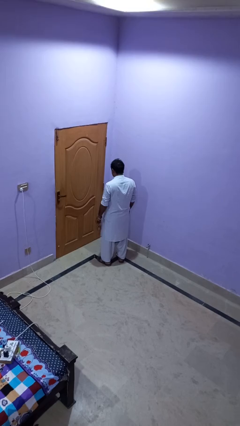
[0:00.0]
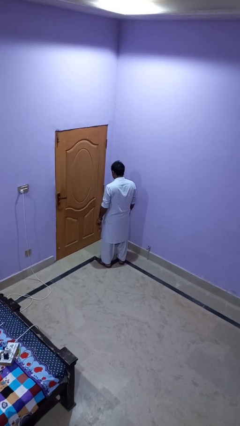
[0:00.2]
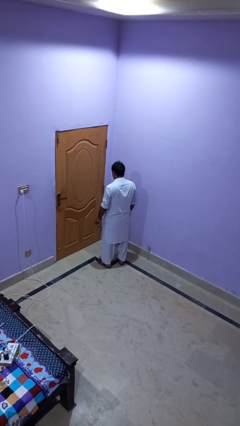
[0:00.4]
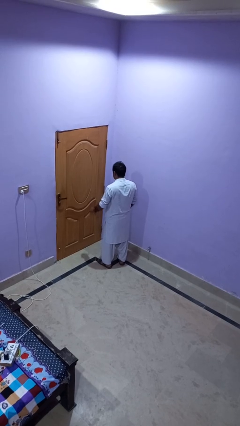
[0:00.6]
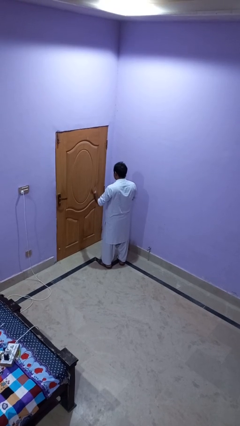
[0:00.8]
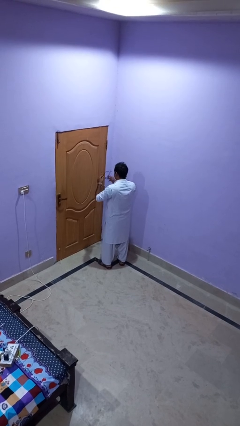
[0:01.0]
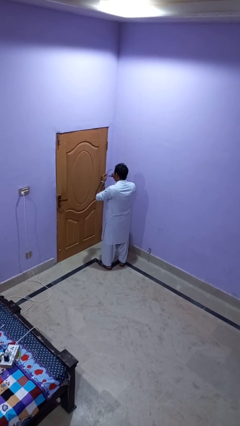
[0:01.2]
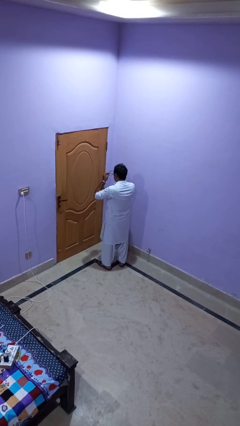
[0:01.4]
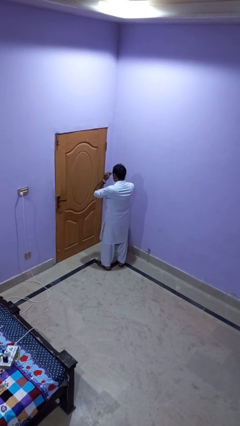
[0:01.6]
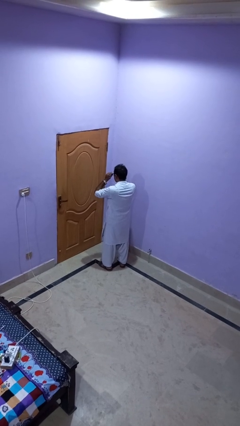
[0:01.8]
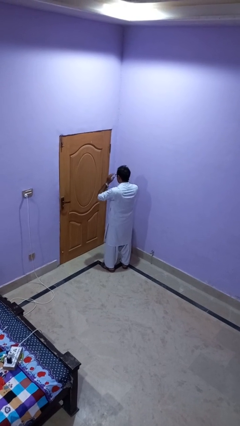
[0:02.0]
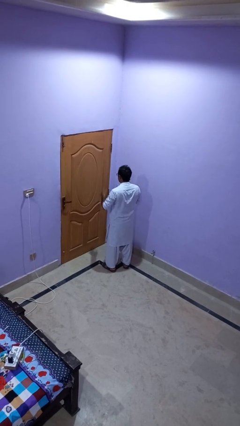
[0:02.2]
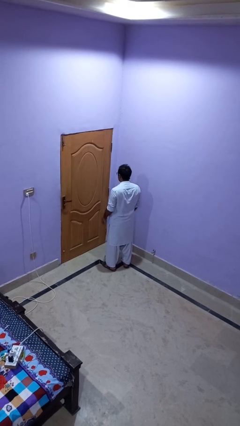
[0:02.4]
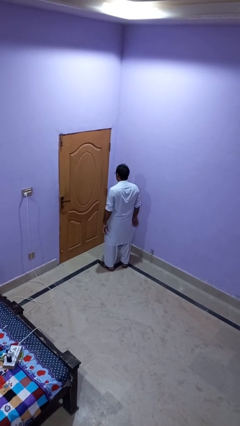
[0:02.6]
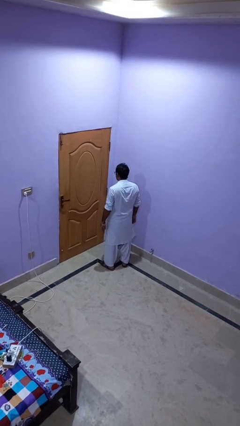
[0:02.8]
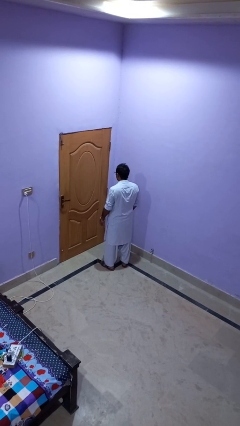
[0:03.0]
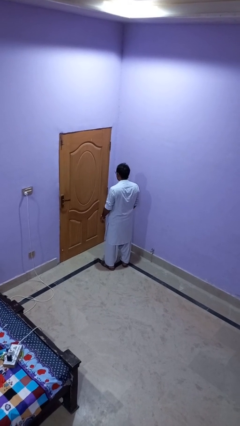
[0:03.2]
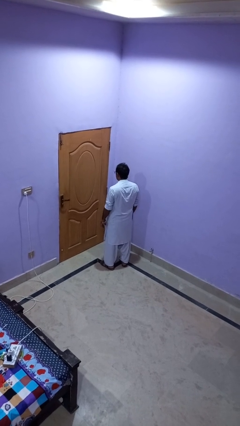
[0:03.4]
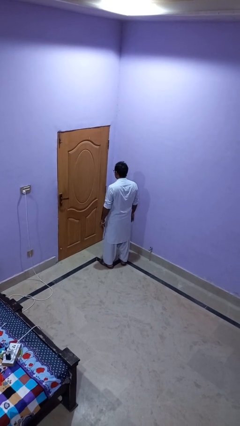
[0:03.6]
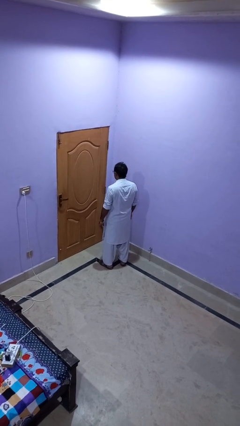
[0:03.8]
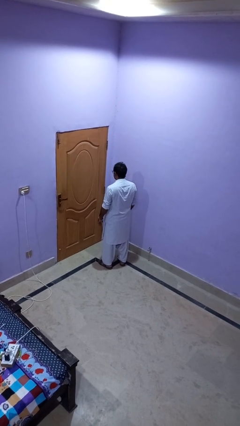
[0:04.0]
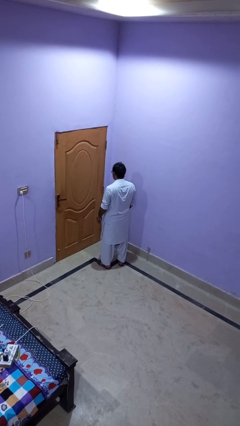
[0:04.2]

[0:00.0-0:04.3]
person puts on glasses

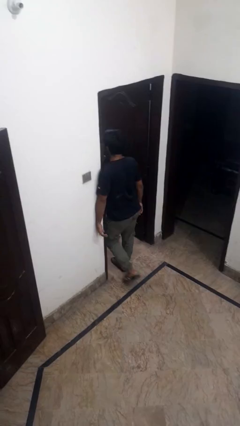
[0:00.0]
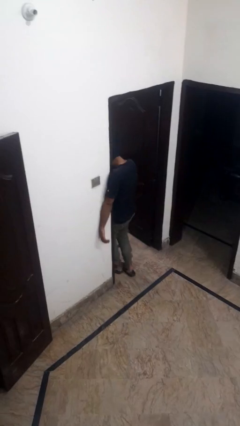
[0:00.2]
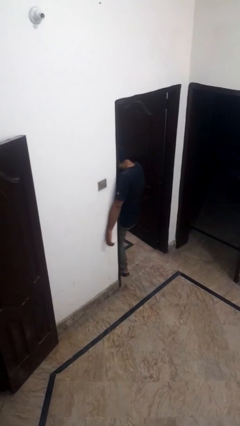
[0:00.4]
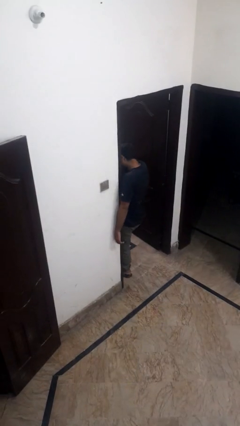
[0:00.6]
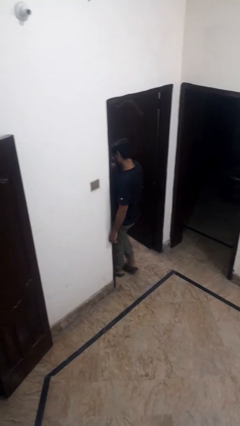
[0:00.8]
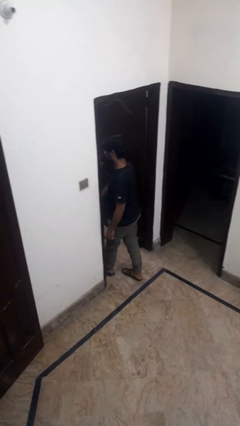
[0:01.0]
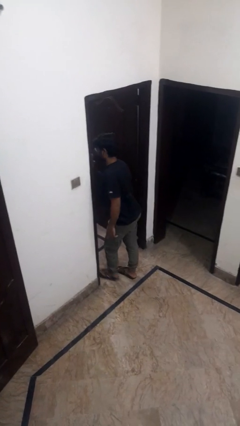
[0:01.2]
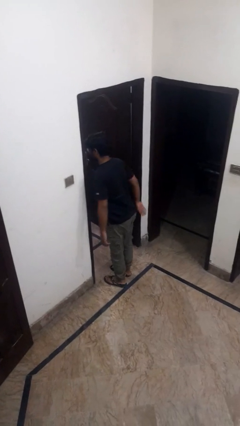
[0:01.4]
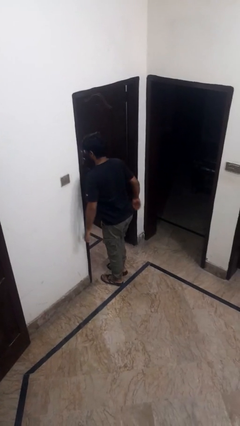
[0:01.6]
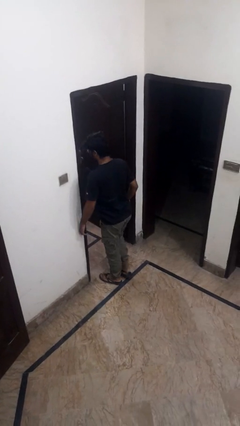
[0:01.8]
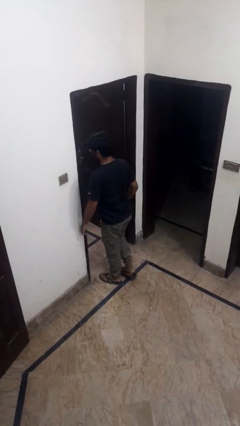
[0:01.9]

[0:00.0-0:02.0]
person bumps into wall

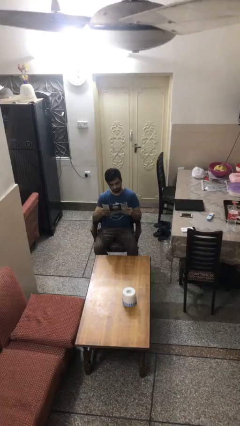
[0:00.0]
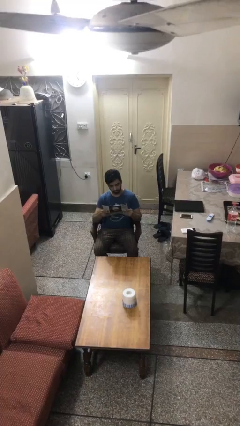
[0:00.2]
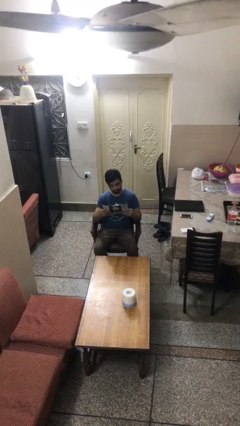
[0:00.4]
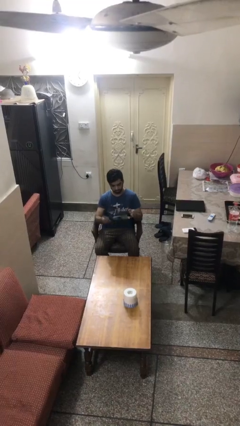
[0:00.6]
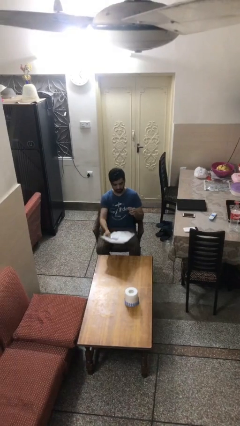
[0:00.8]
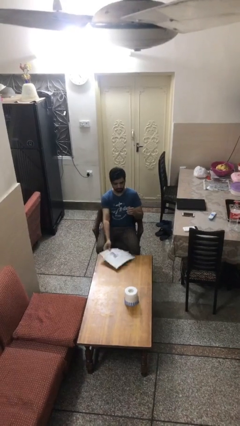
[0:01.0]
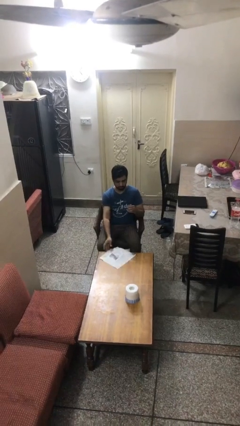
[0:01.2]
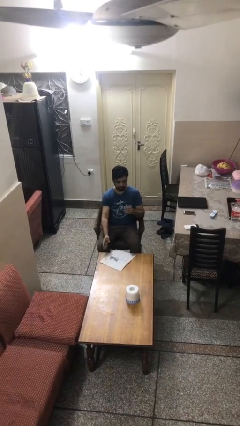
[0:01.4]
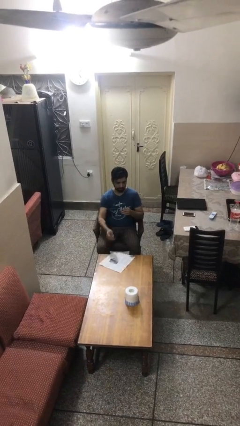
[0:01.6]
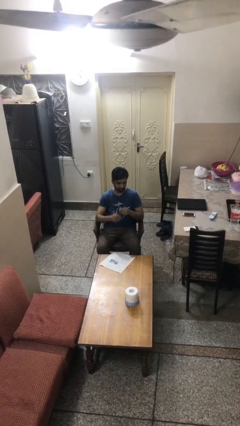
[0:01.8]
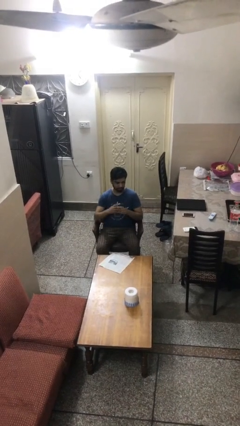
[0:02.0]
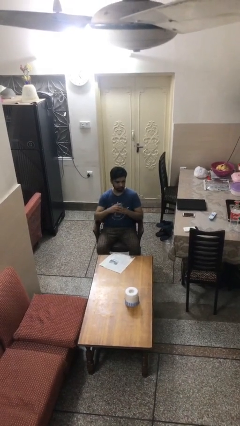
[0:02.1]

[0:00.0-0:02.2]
person puts down object on table

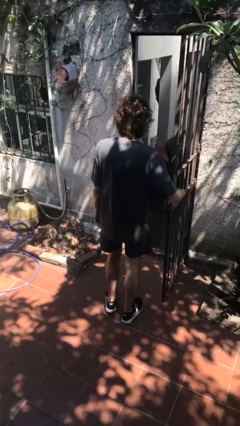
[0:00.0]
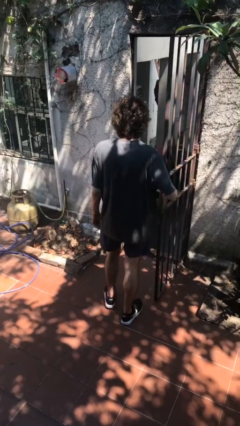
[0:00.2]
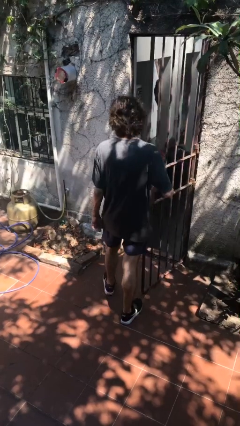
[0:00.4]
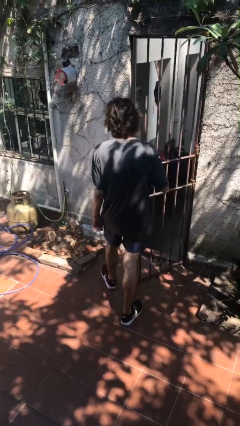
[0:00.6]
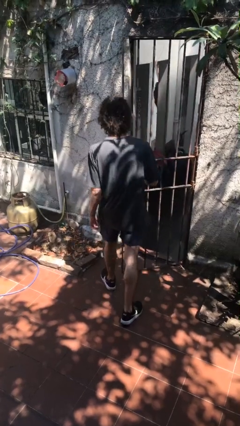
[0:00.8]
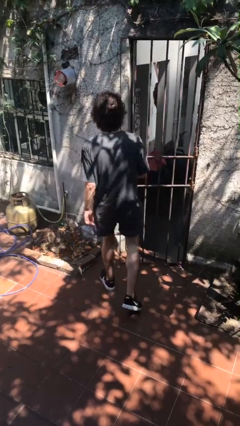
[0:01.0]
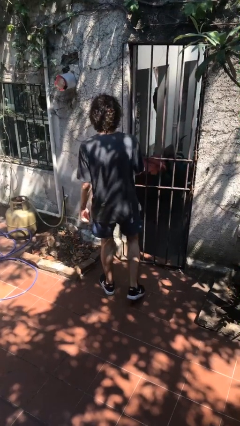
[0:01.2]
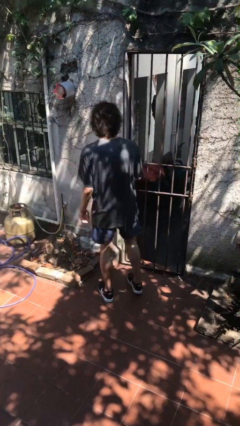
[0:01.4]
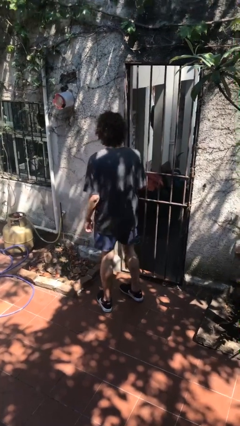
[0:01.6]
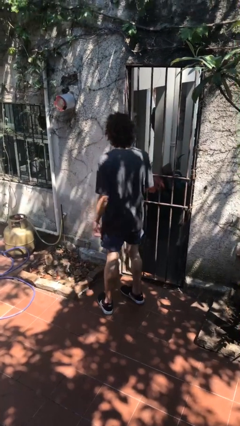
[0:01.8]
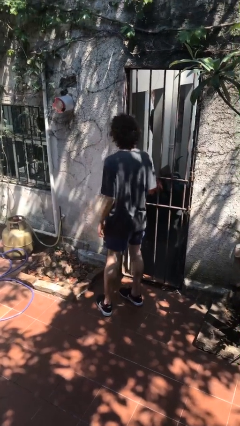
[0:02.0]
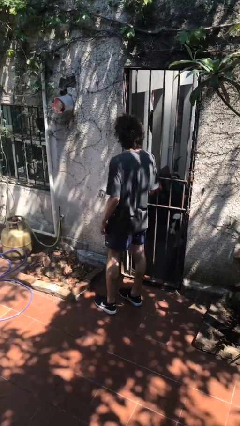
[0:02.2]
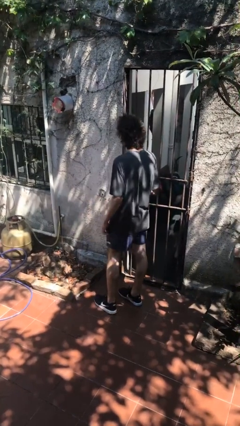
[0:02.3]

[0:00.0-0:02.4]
person closes facility door

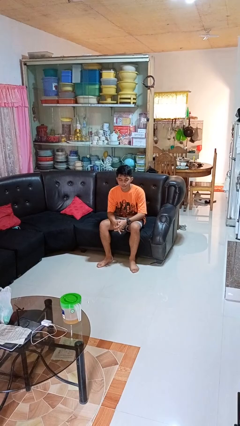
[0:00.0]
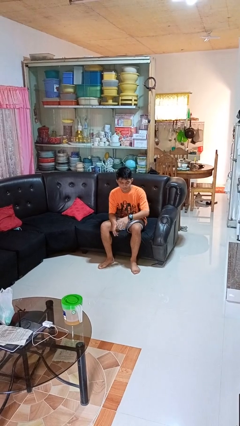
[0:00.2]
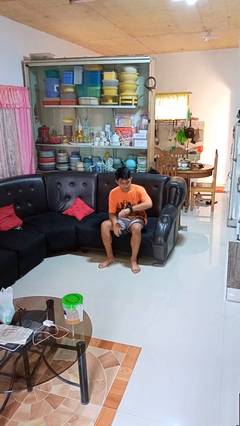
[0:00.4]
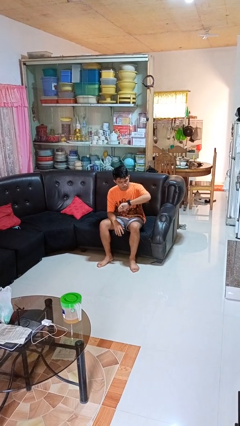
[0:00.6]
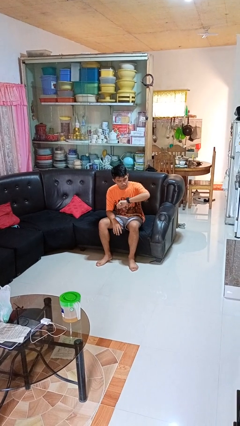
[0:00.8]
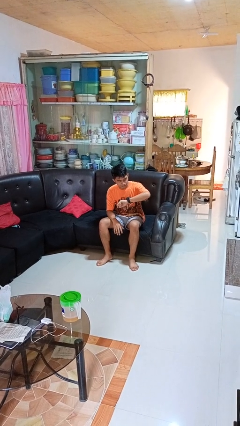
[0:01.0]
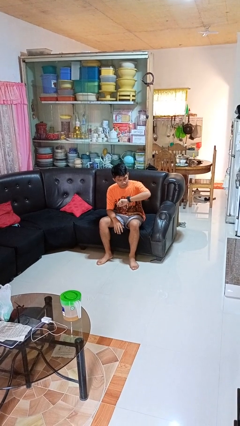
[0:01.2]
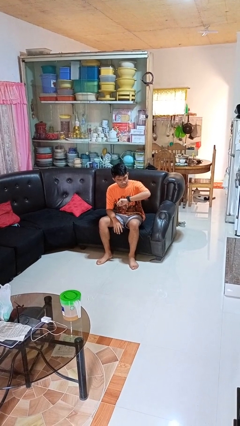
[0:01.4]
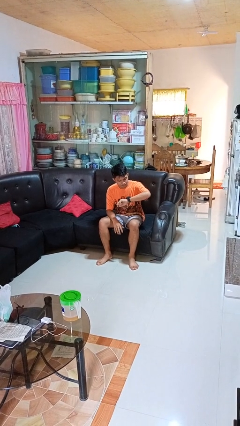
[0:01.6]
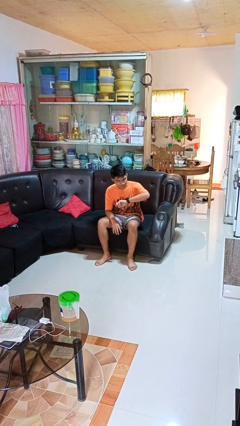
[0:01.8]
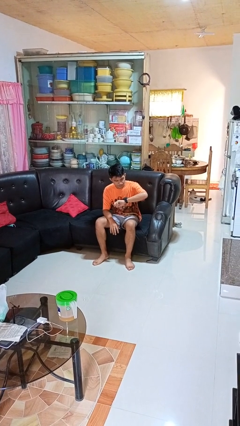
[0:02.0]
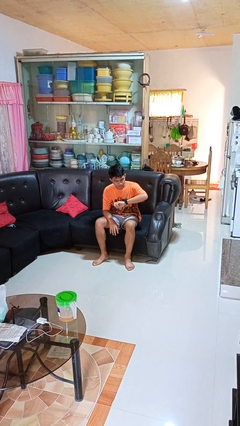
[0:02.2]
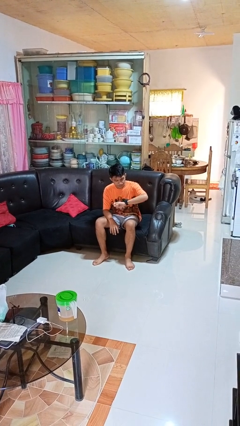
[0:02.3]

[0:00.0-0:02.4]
person looks at wristwatch

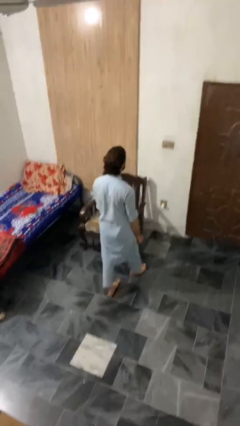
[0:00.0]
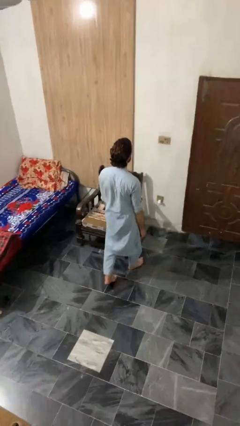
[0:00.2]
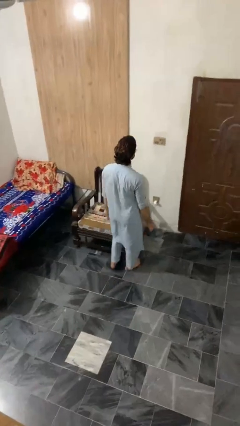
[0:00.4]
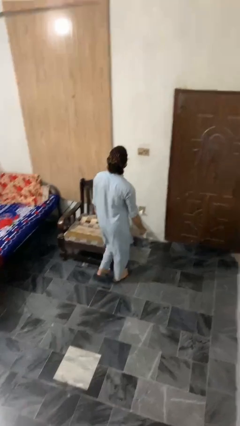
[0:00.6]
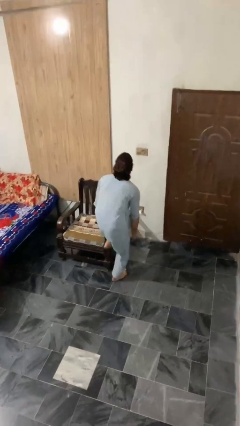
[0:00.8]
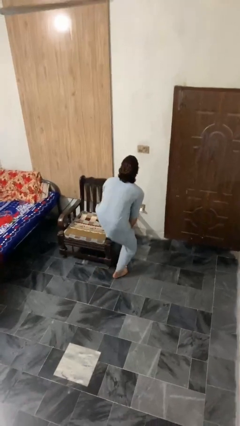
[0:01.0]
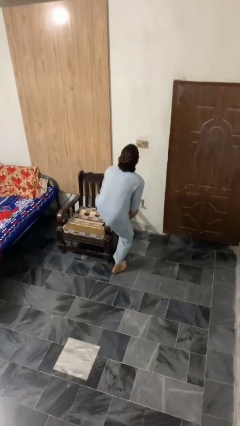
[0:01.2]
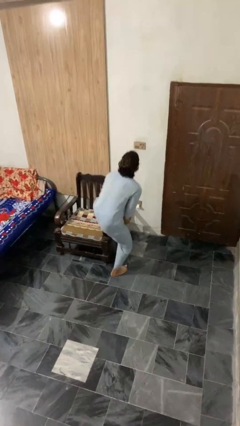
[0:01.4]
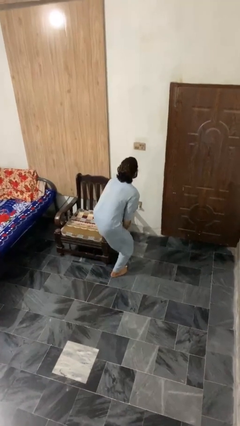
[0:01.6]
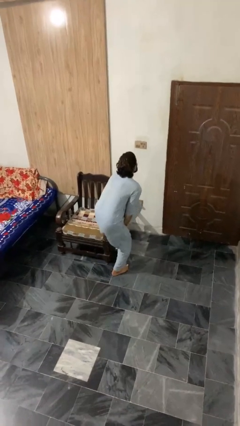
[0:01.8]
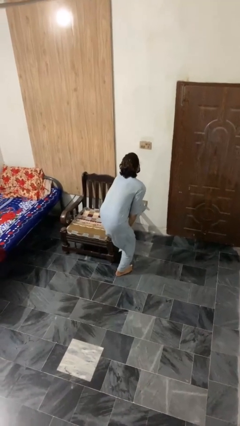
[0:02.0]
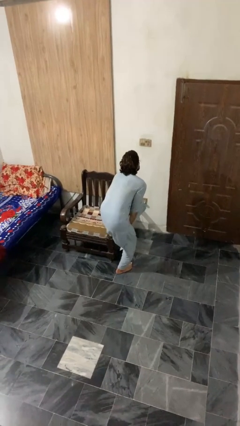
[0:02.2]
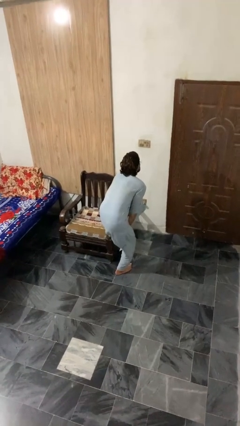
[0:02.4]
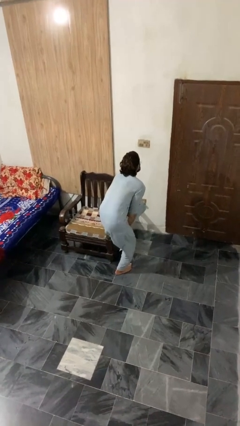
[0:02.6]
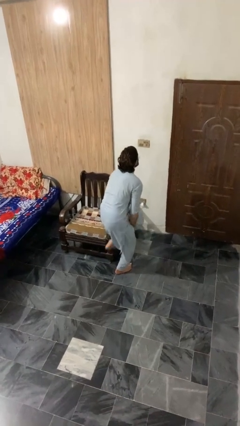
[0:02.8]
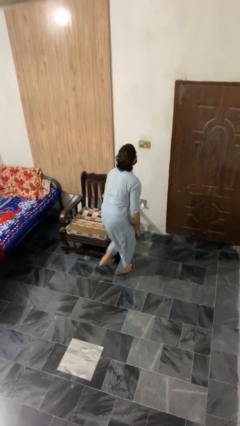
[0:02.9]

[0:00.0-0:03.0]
person stubs toe

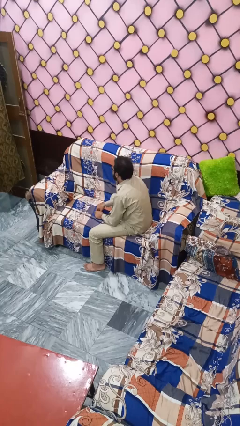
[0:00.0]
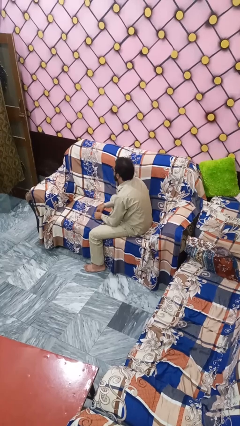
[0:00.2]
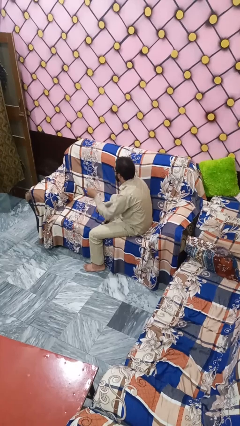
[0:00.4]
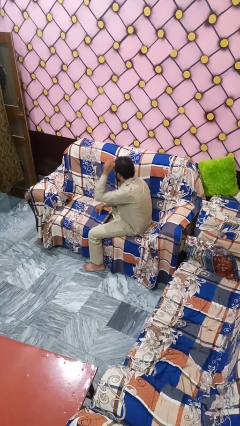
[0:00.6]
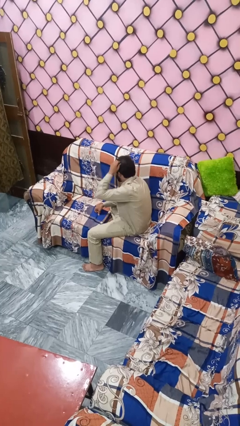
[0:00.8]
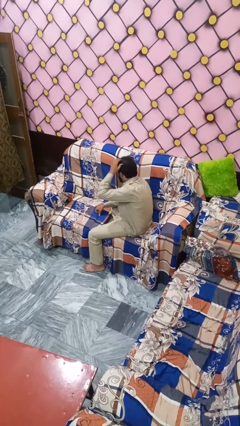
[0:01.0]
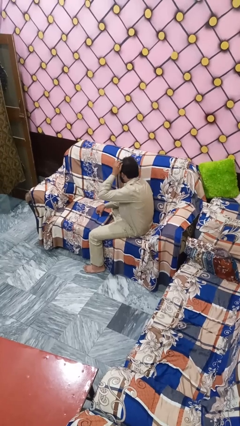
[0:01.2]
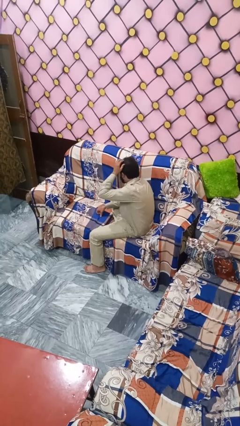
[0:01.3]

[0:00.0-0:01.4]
person strokes hair
